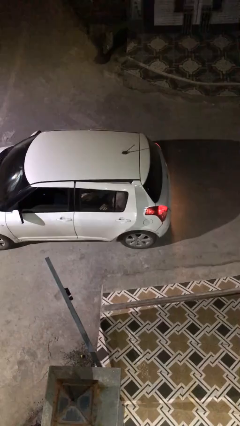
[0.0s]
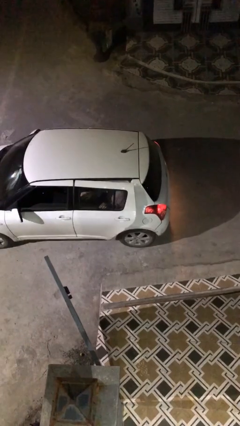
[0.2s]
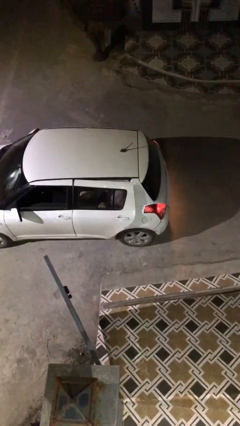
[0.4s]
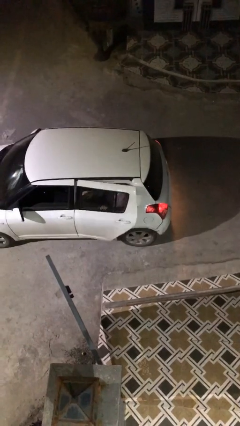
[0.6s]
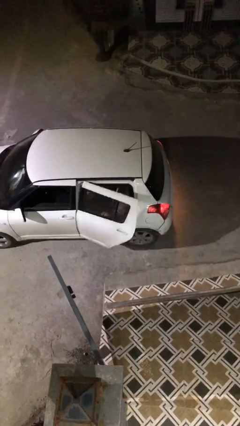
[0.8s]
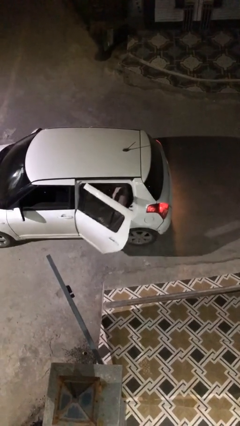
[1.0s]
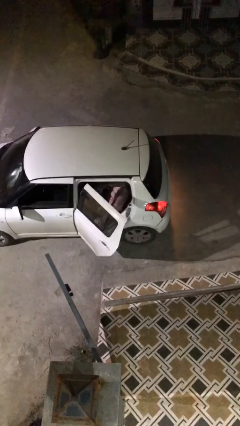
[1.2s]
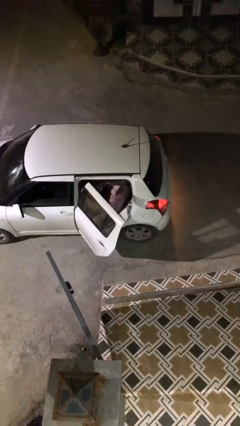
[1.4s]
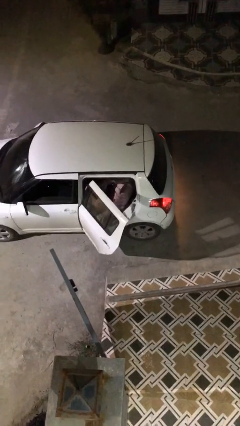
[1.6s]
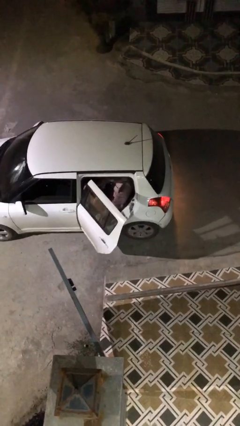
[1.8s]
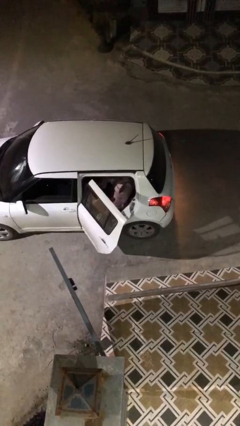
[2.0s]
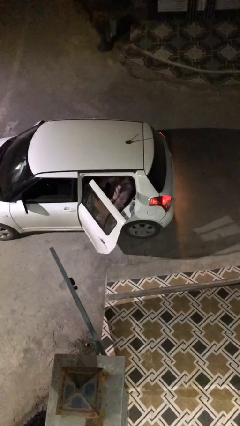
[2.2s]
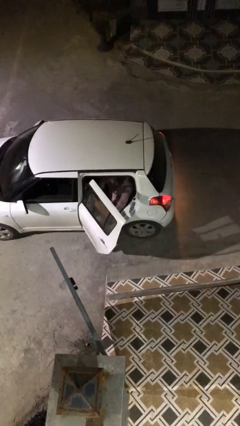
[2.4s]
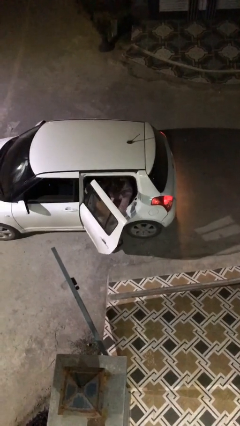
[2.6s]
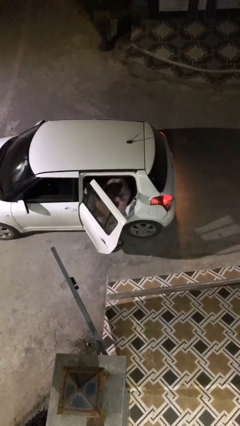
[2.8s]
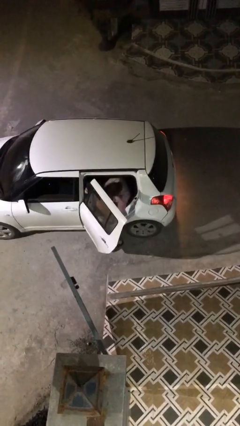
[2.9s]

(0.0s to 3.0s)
person opens car door

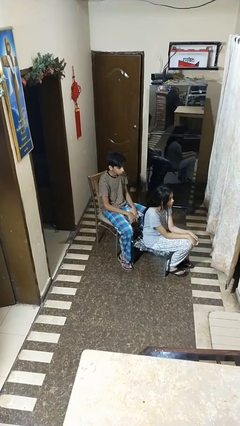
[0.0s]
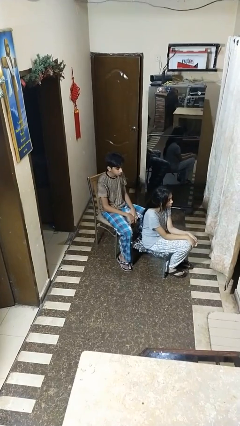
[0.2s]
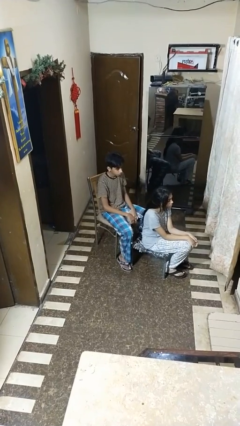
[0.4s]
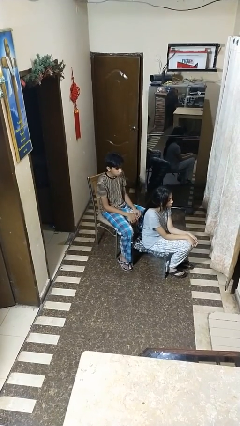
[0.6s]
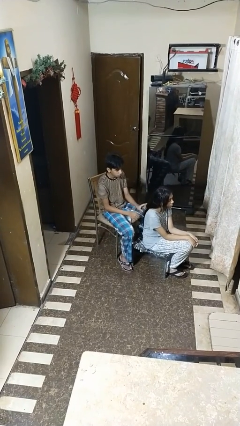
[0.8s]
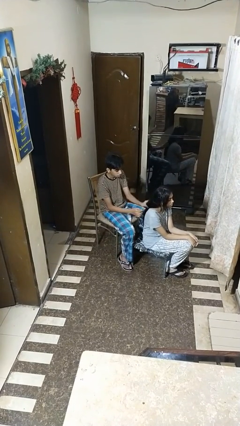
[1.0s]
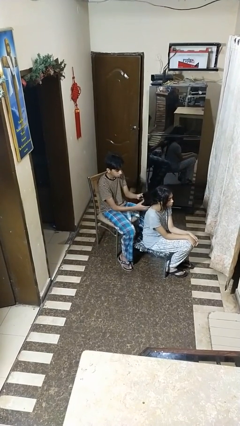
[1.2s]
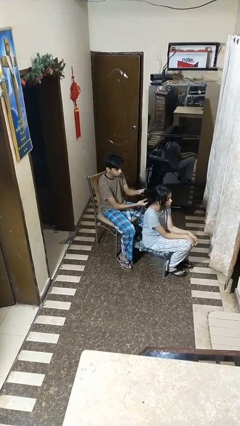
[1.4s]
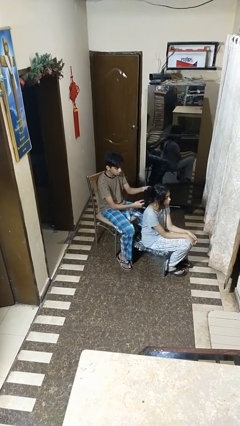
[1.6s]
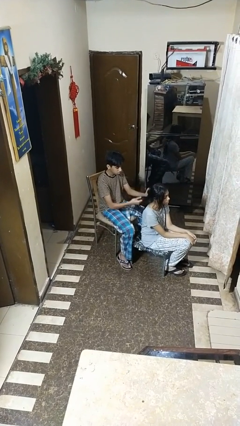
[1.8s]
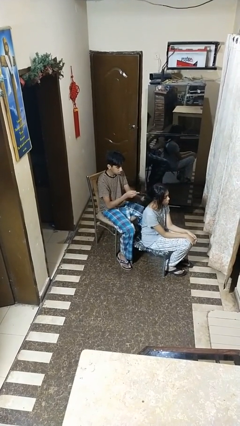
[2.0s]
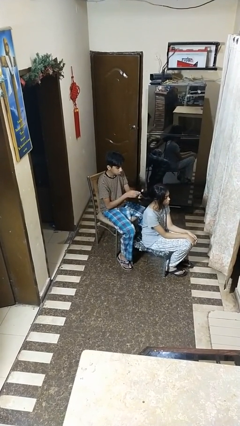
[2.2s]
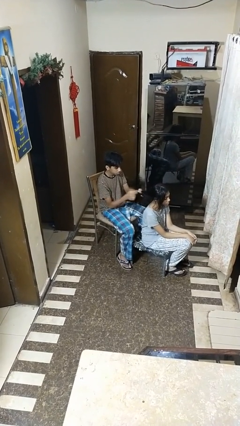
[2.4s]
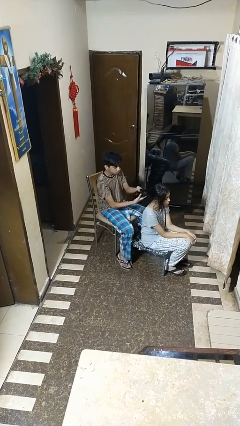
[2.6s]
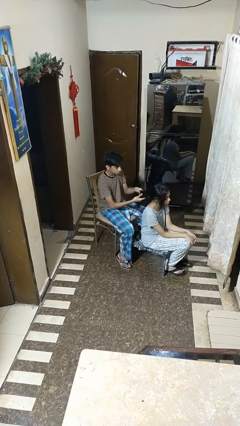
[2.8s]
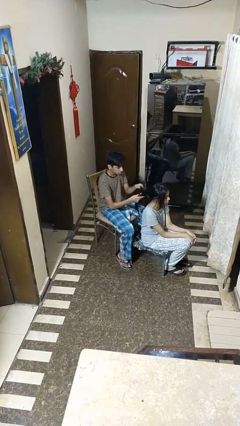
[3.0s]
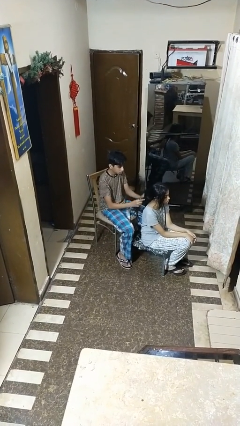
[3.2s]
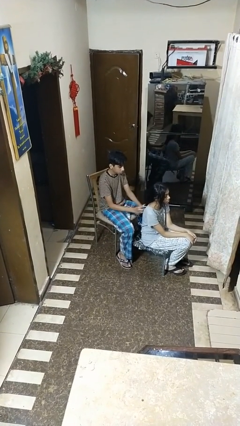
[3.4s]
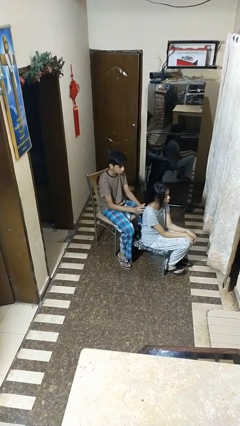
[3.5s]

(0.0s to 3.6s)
person braids hair of person

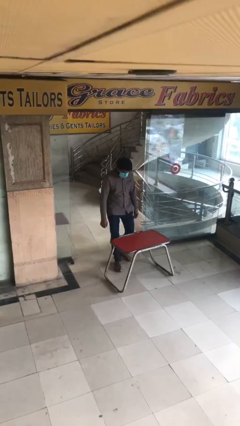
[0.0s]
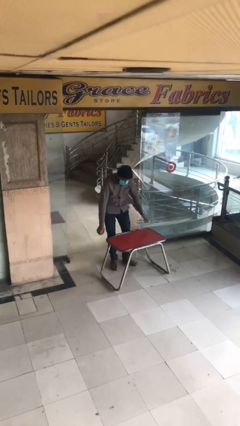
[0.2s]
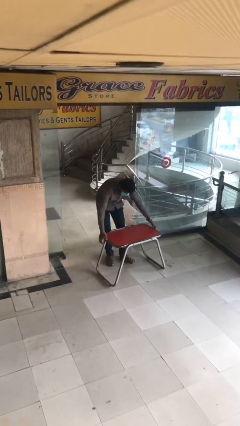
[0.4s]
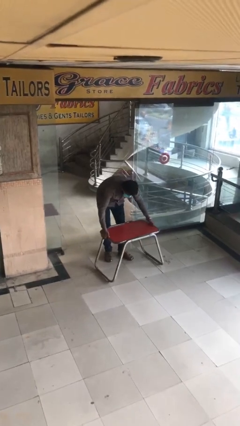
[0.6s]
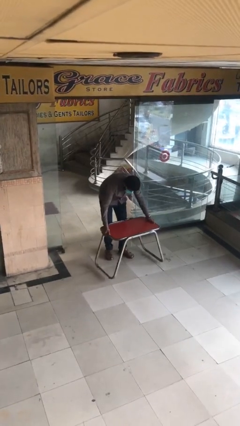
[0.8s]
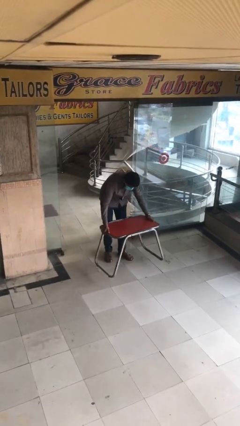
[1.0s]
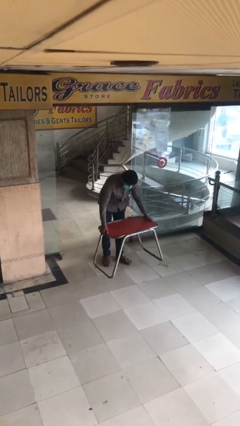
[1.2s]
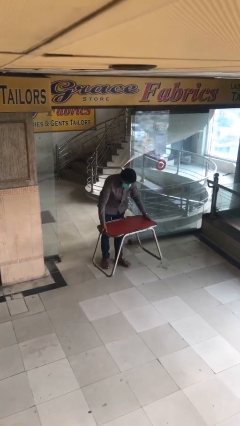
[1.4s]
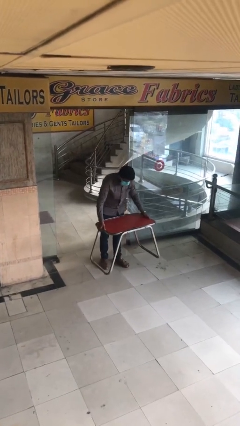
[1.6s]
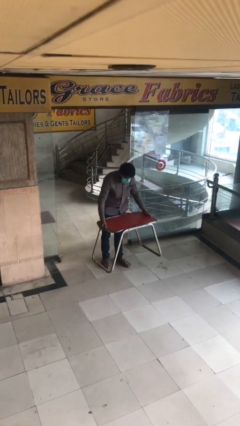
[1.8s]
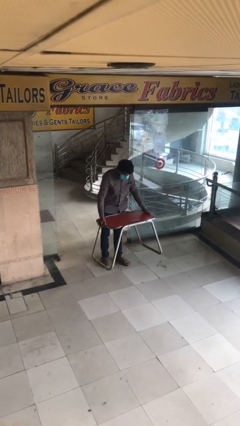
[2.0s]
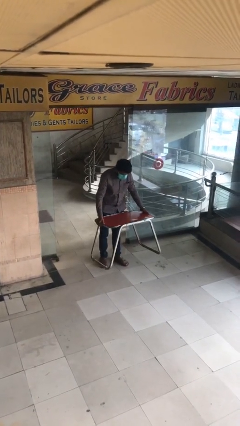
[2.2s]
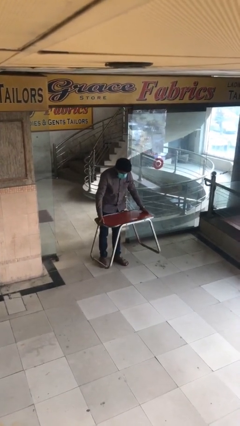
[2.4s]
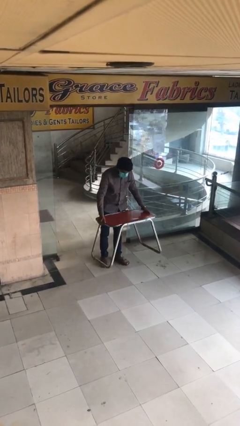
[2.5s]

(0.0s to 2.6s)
person picks up object from floor

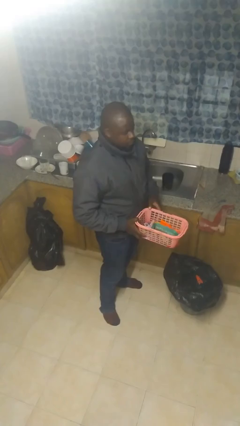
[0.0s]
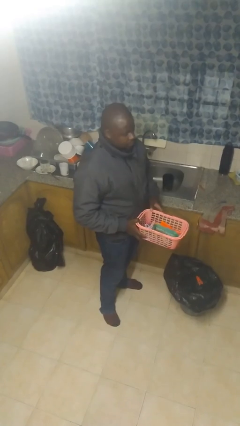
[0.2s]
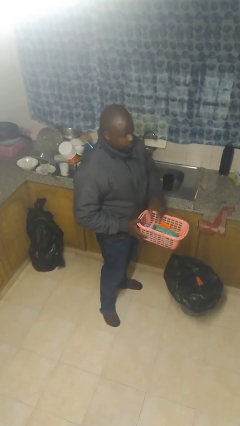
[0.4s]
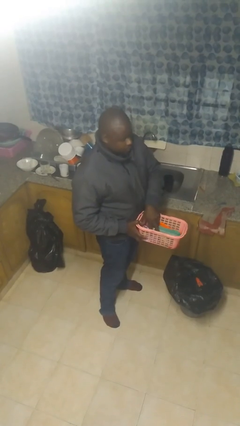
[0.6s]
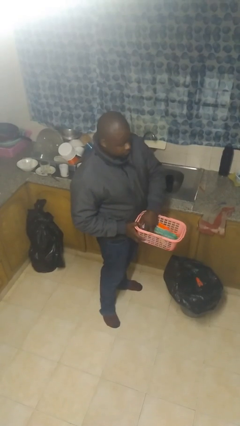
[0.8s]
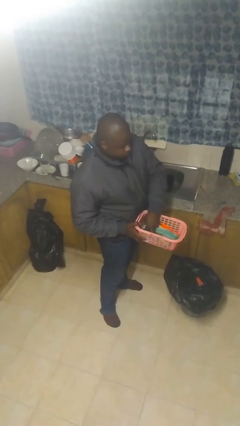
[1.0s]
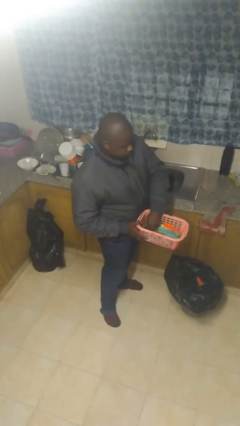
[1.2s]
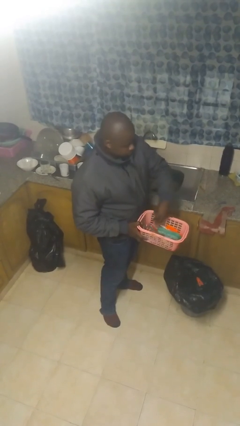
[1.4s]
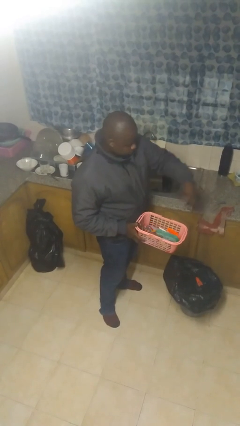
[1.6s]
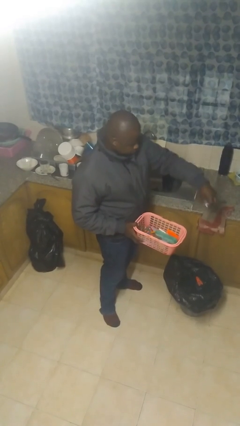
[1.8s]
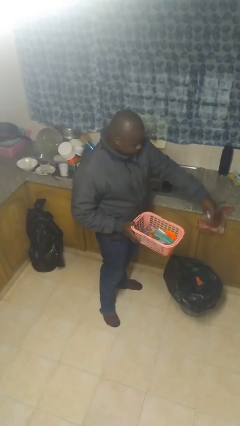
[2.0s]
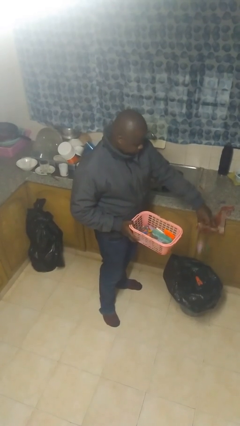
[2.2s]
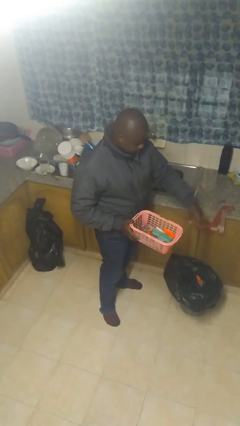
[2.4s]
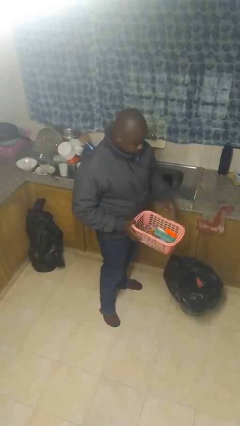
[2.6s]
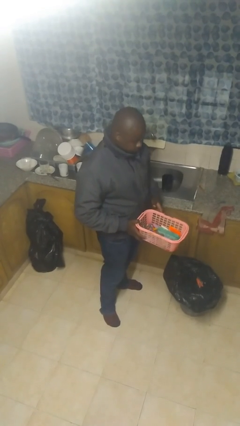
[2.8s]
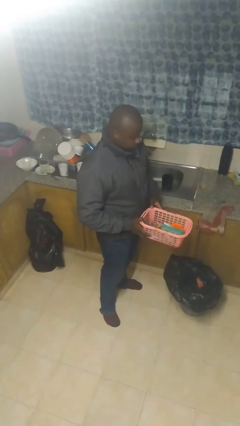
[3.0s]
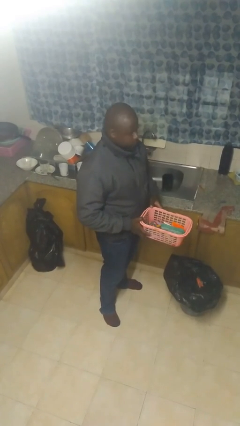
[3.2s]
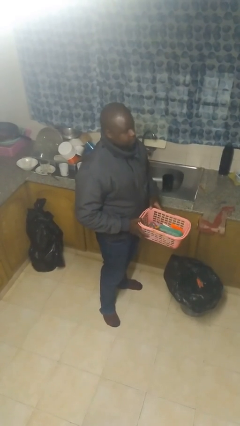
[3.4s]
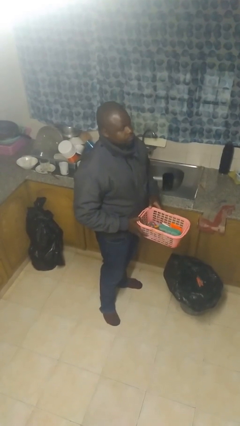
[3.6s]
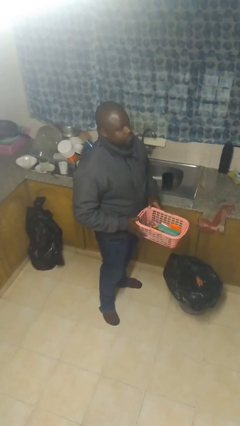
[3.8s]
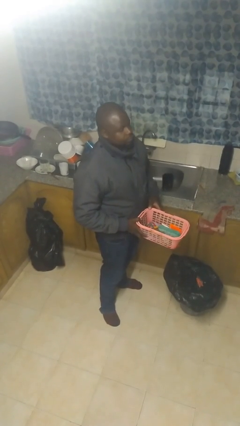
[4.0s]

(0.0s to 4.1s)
person discards trash

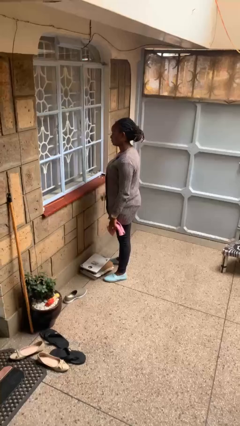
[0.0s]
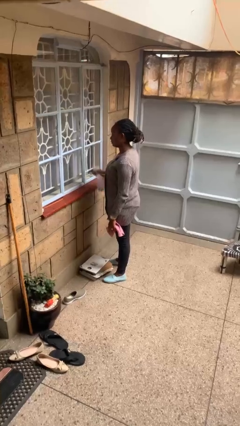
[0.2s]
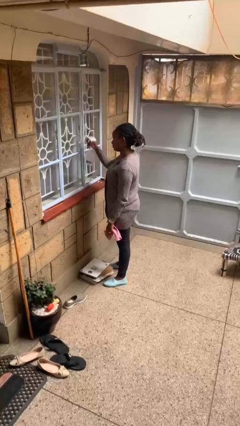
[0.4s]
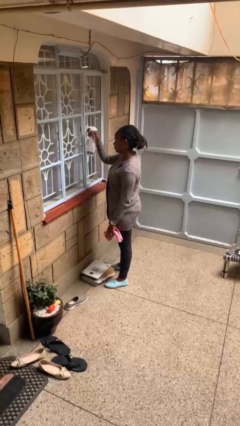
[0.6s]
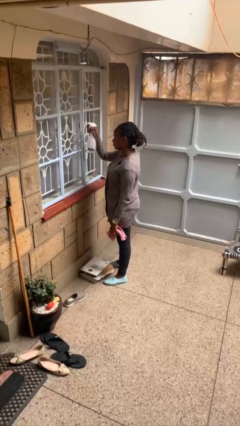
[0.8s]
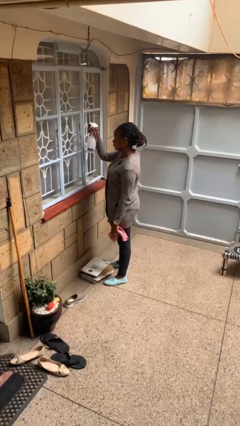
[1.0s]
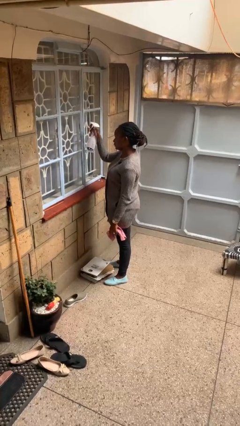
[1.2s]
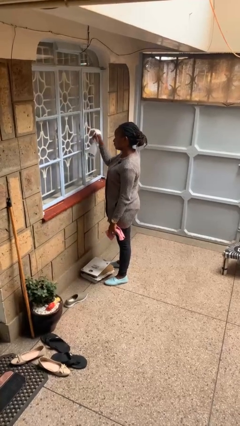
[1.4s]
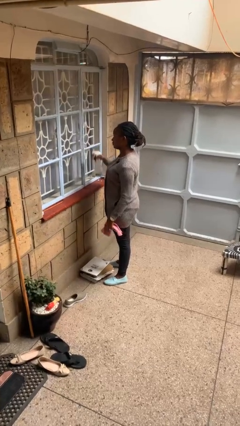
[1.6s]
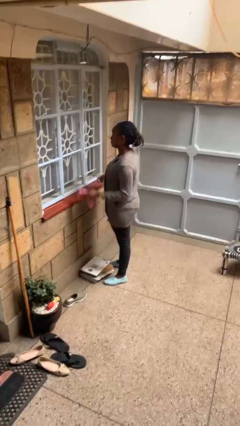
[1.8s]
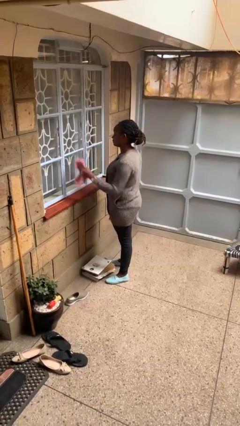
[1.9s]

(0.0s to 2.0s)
person sprays from bottle

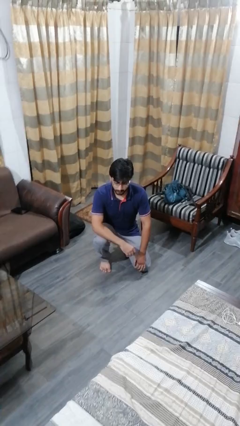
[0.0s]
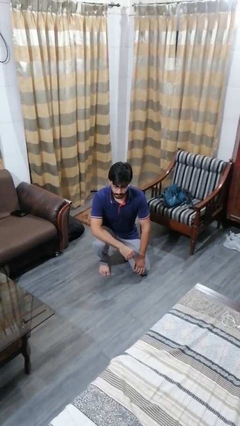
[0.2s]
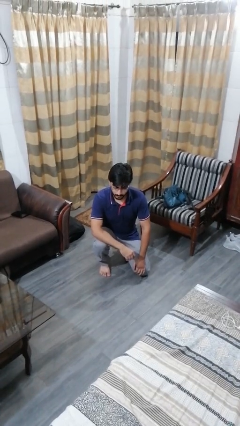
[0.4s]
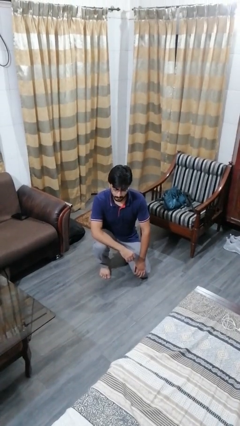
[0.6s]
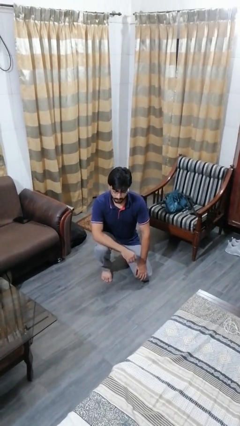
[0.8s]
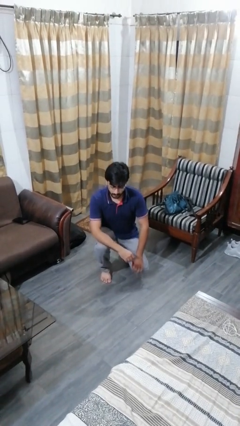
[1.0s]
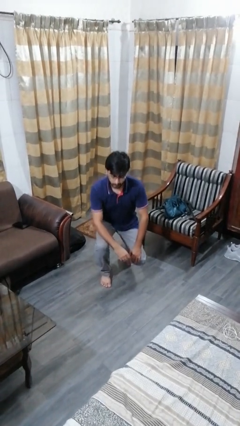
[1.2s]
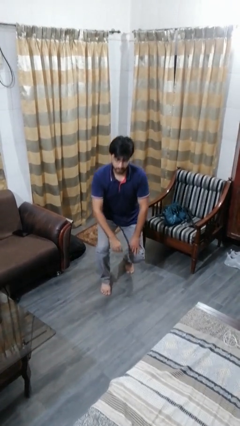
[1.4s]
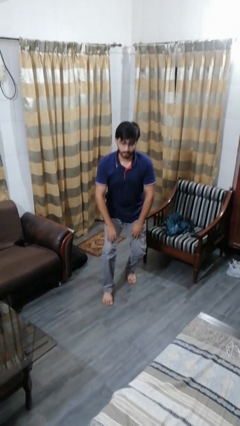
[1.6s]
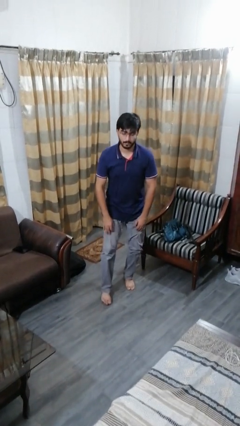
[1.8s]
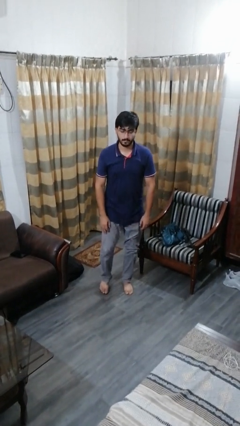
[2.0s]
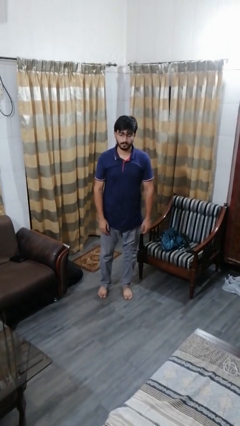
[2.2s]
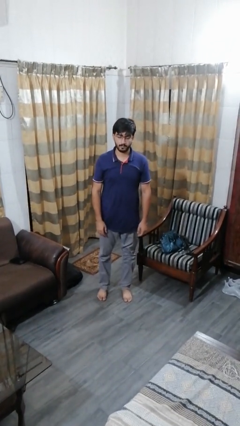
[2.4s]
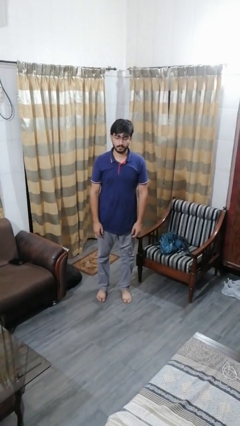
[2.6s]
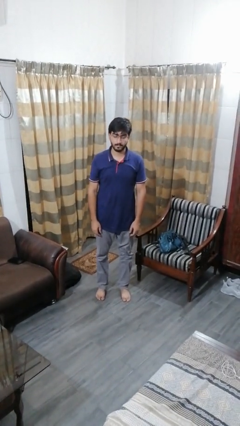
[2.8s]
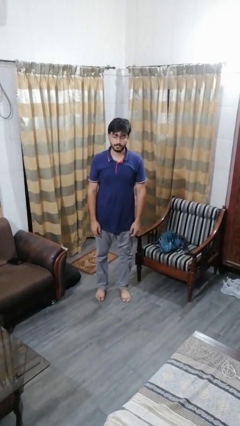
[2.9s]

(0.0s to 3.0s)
person stands up from floor
